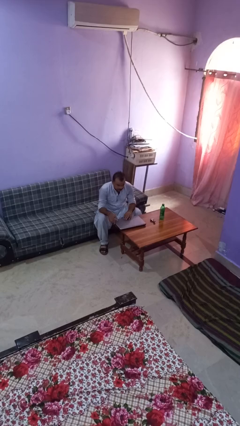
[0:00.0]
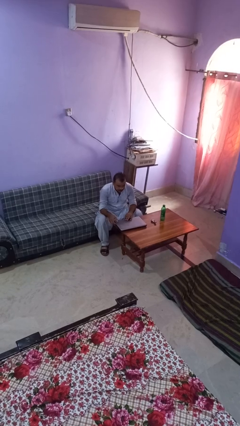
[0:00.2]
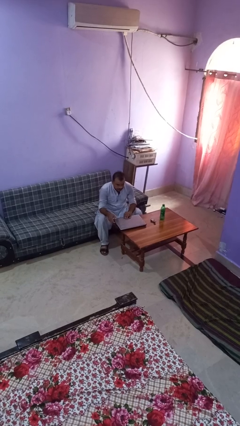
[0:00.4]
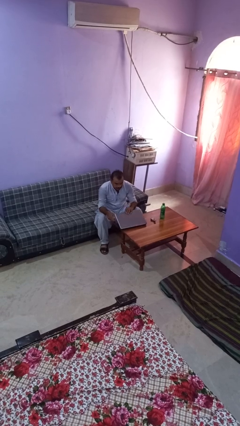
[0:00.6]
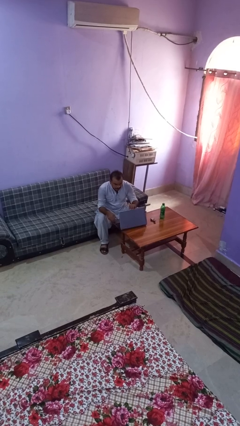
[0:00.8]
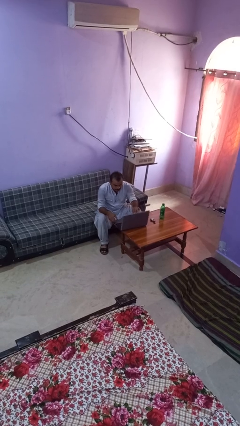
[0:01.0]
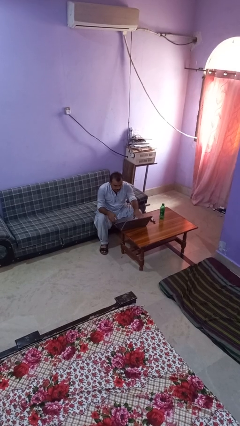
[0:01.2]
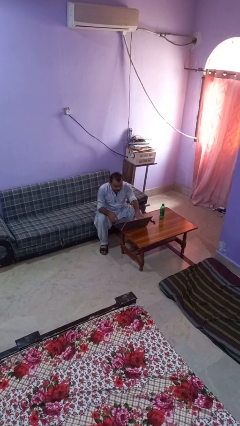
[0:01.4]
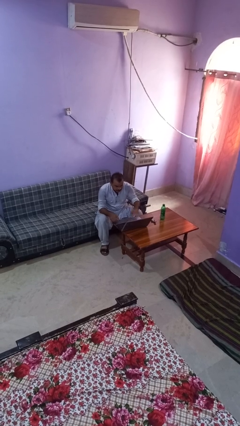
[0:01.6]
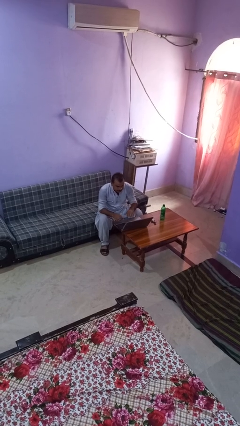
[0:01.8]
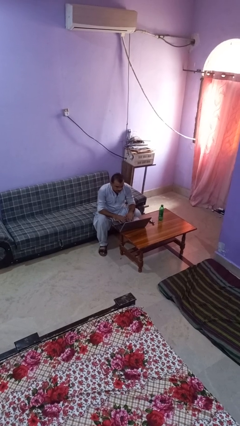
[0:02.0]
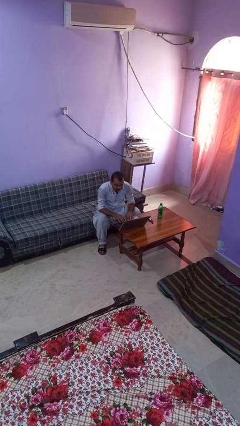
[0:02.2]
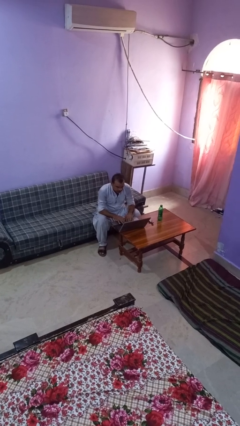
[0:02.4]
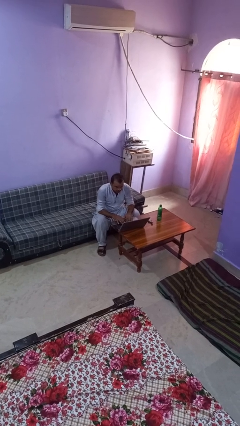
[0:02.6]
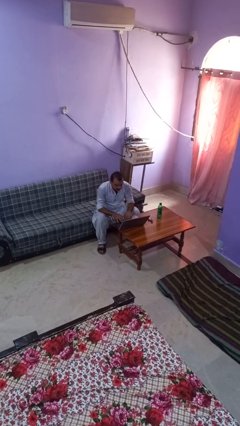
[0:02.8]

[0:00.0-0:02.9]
person opens laptop

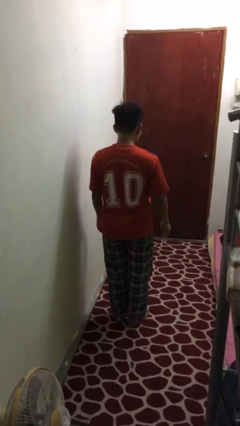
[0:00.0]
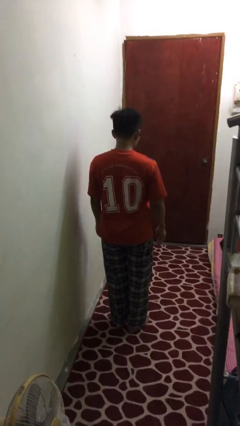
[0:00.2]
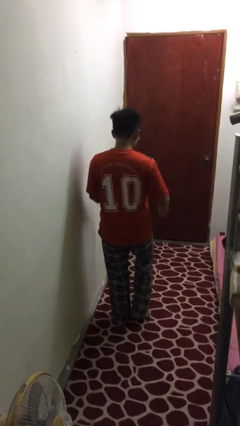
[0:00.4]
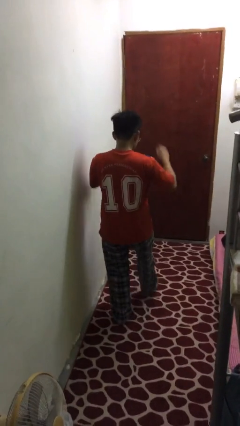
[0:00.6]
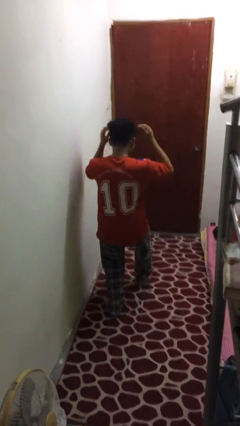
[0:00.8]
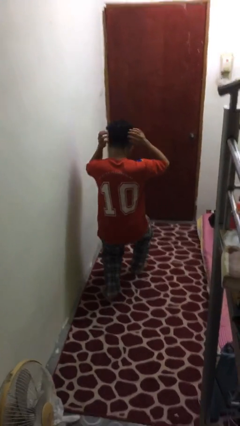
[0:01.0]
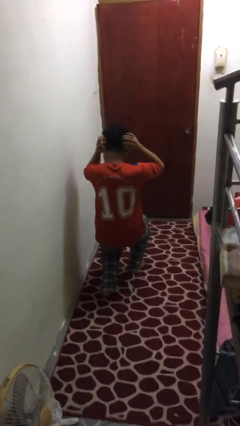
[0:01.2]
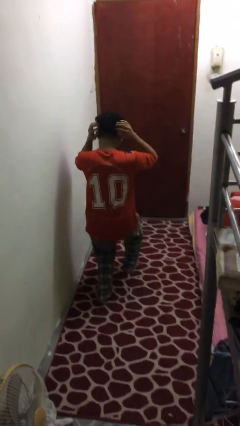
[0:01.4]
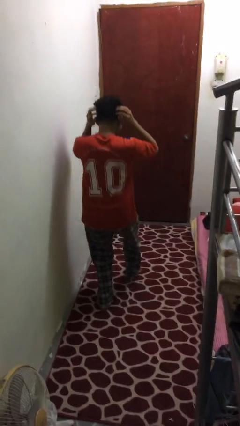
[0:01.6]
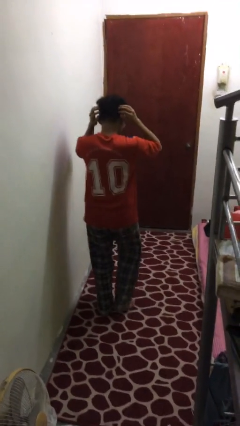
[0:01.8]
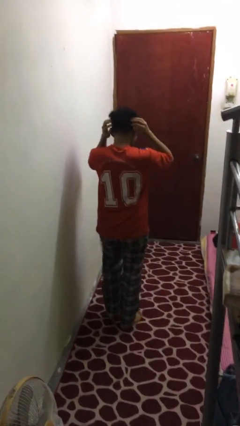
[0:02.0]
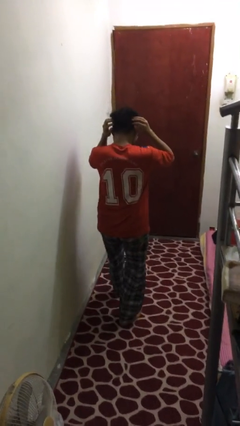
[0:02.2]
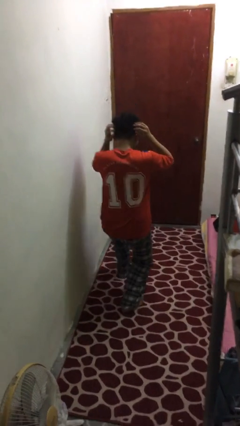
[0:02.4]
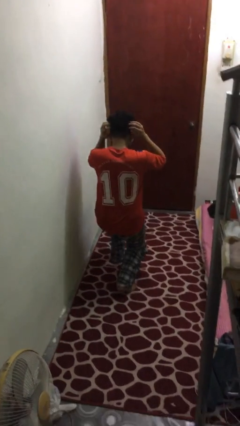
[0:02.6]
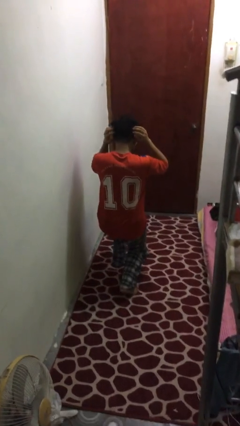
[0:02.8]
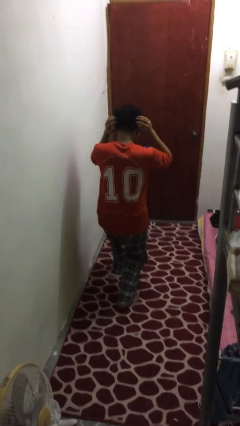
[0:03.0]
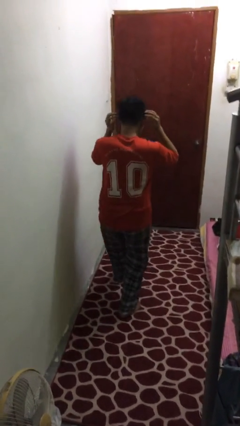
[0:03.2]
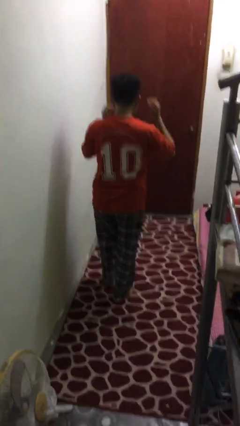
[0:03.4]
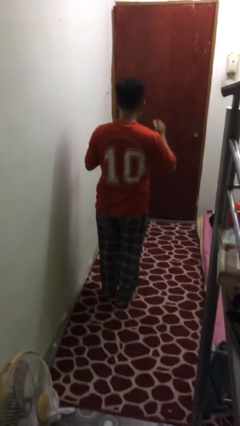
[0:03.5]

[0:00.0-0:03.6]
person exercises with lunges

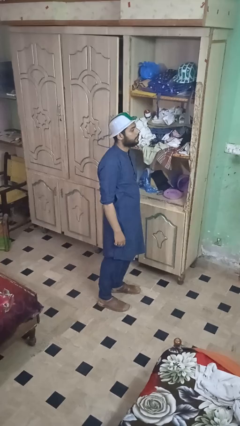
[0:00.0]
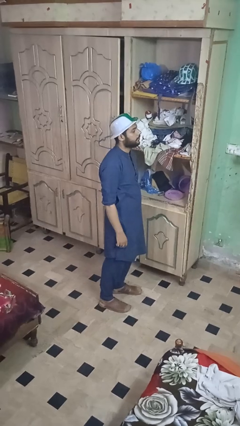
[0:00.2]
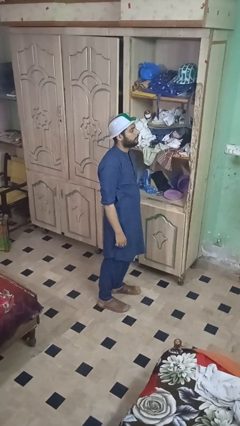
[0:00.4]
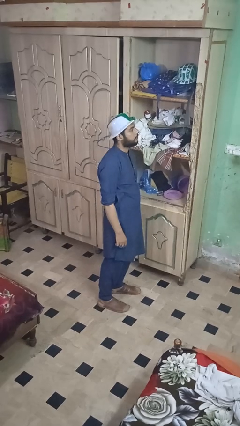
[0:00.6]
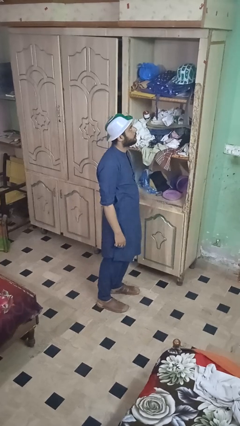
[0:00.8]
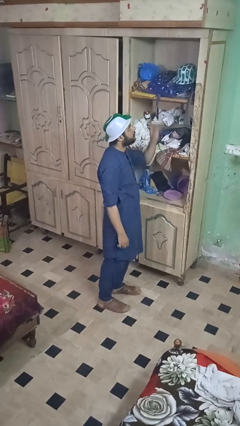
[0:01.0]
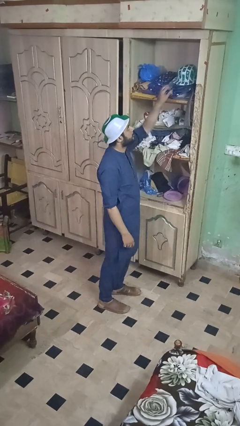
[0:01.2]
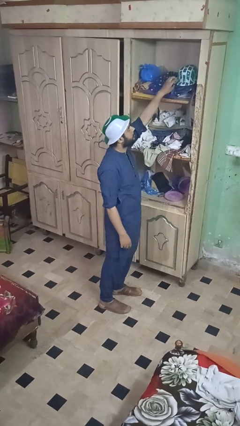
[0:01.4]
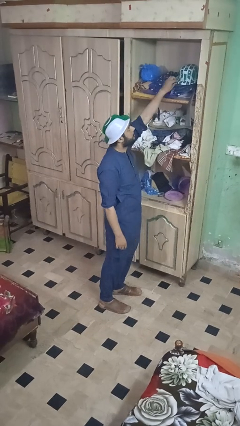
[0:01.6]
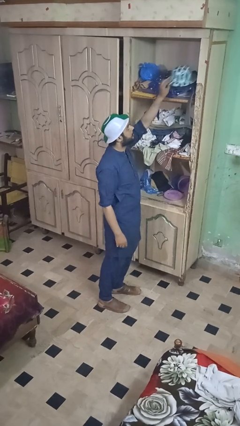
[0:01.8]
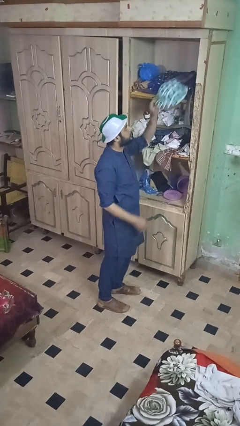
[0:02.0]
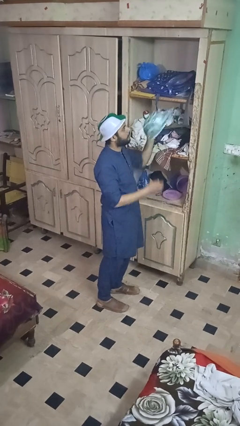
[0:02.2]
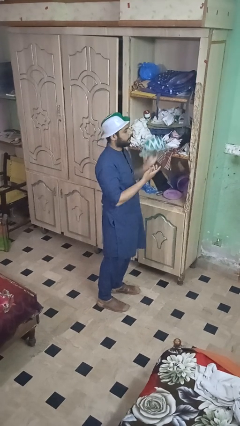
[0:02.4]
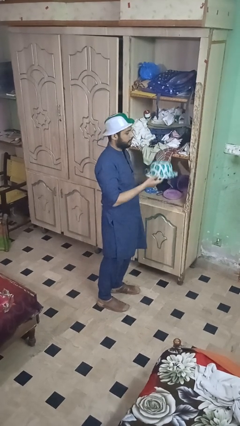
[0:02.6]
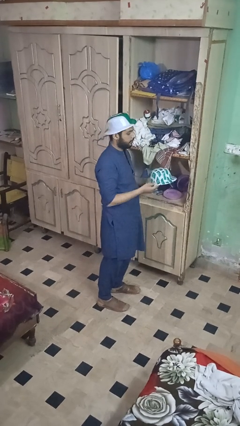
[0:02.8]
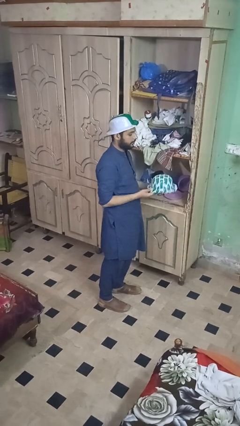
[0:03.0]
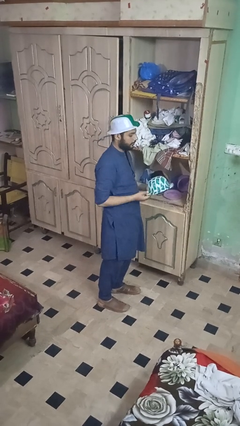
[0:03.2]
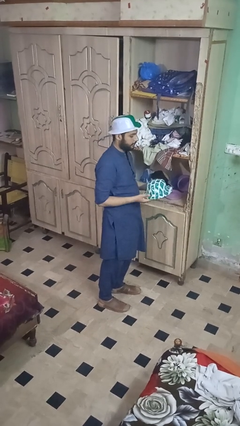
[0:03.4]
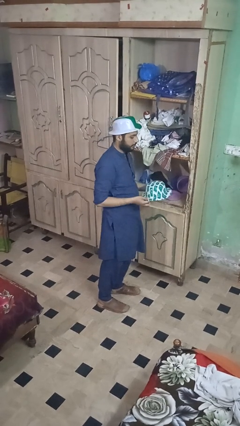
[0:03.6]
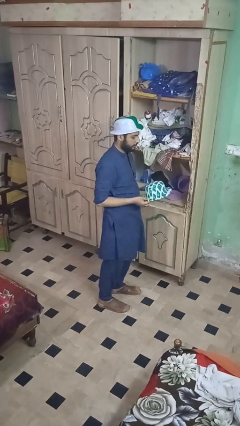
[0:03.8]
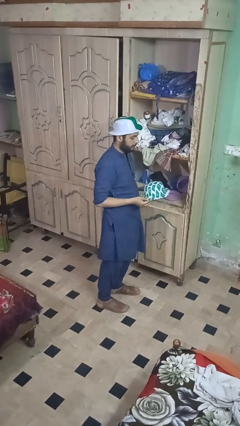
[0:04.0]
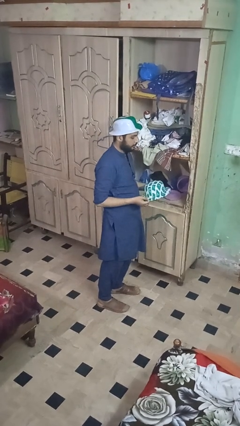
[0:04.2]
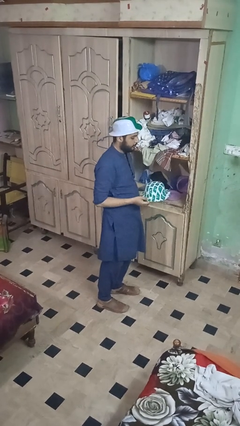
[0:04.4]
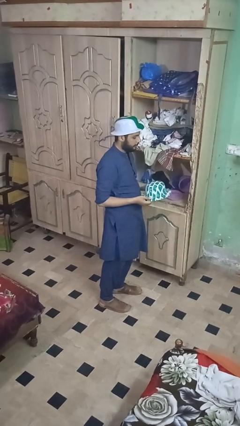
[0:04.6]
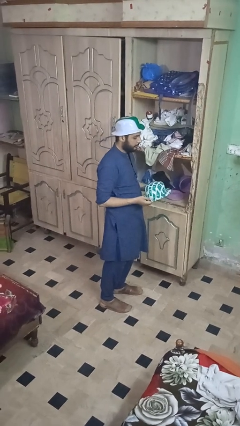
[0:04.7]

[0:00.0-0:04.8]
person picks up object from shelf

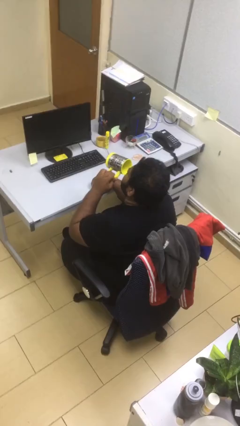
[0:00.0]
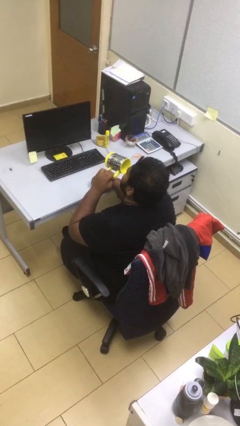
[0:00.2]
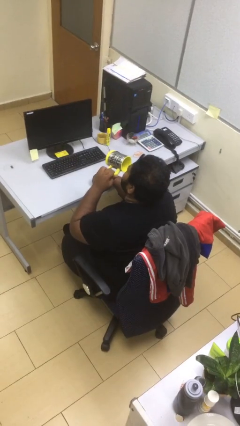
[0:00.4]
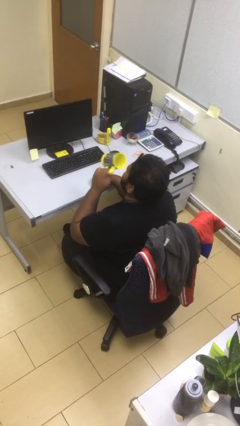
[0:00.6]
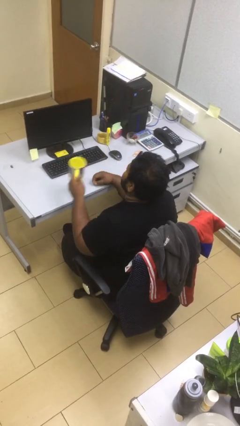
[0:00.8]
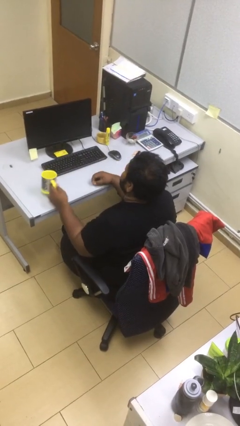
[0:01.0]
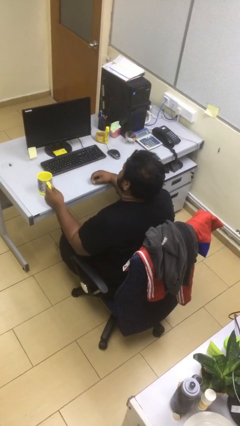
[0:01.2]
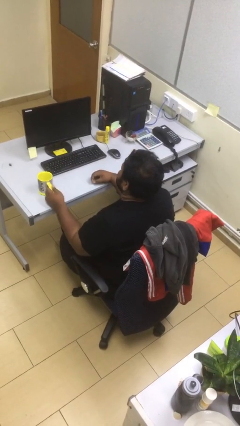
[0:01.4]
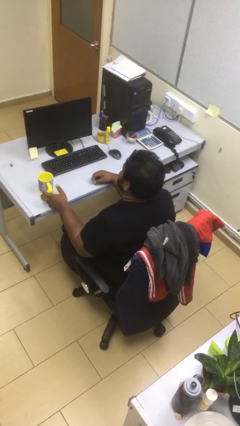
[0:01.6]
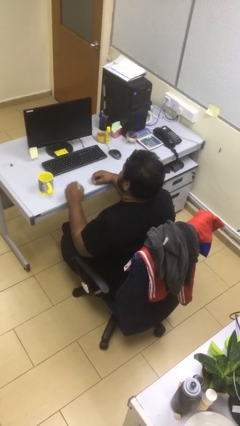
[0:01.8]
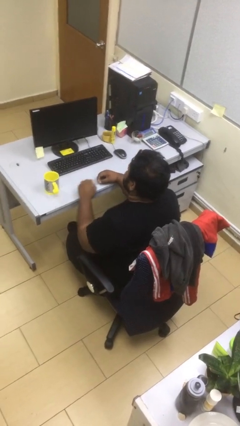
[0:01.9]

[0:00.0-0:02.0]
person puts down object on table

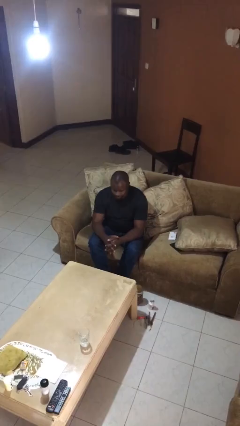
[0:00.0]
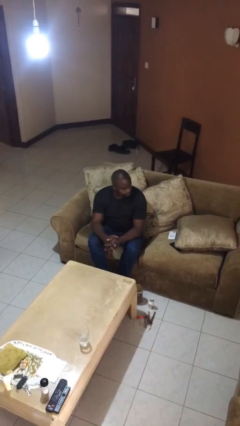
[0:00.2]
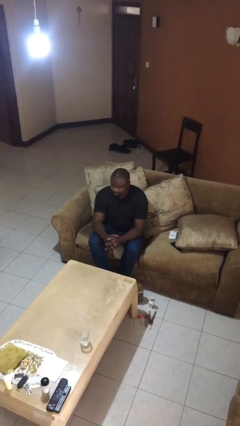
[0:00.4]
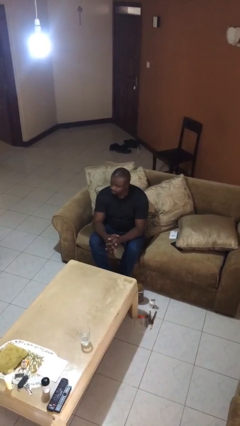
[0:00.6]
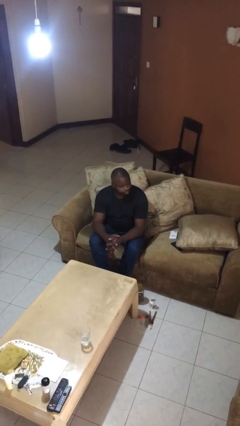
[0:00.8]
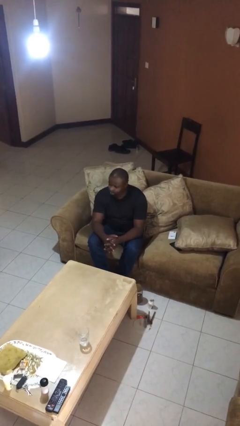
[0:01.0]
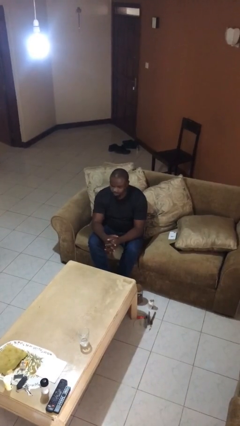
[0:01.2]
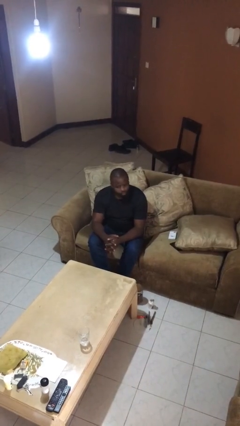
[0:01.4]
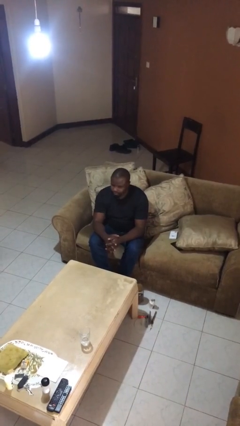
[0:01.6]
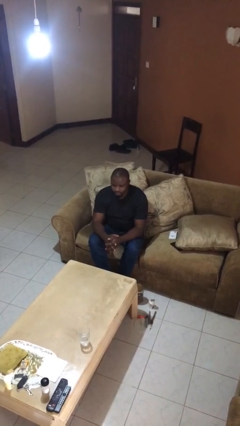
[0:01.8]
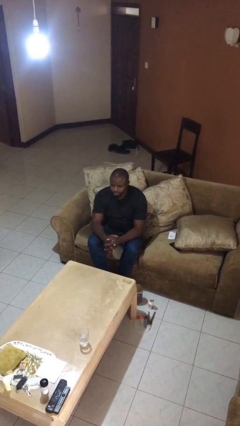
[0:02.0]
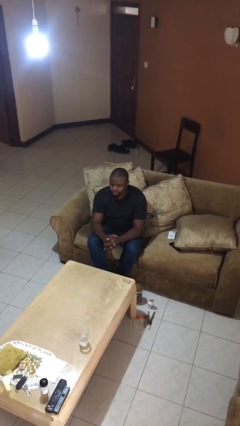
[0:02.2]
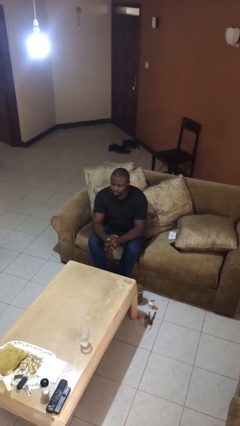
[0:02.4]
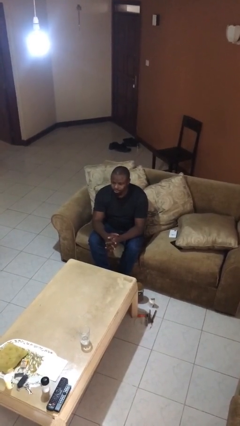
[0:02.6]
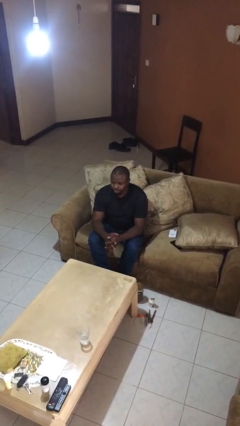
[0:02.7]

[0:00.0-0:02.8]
person shakes head

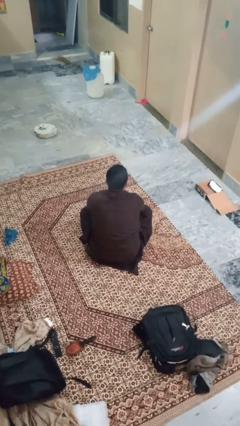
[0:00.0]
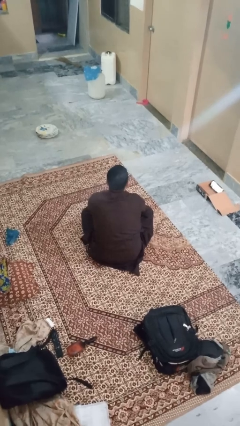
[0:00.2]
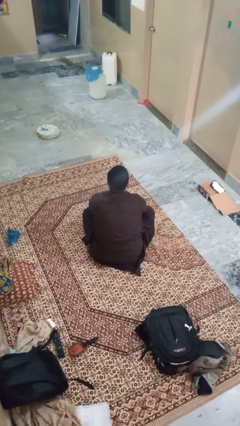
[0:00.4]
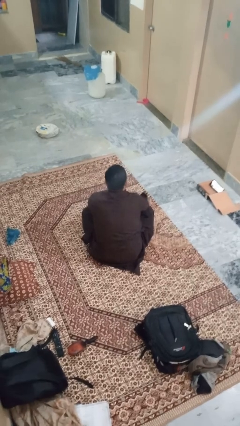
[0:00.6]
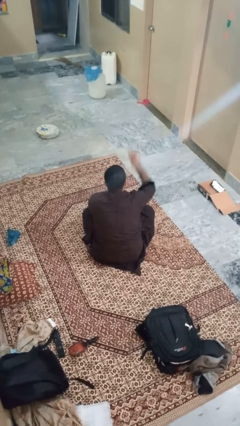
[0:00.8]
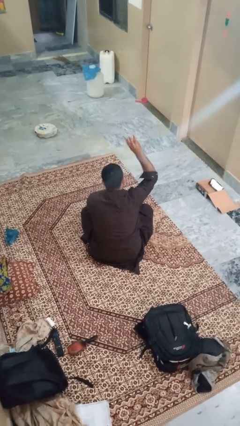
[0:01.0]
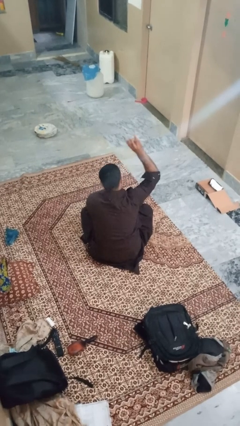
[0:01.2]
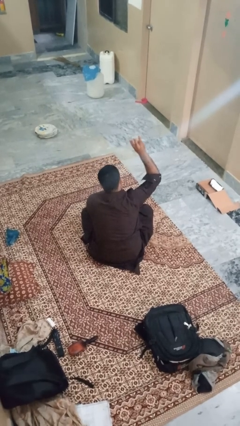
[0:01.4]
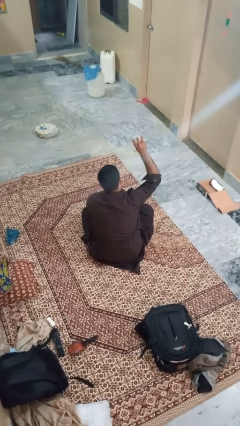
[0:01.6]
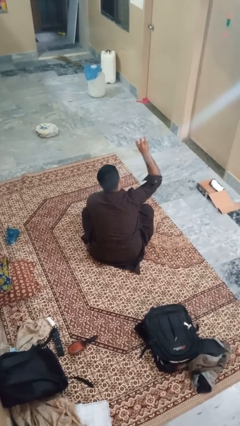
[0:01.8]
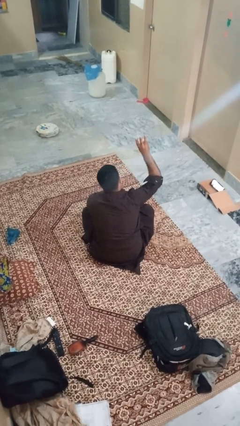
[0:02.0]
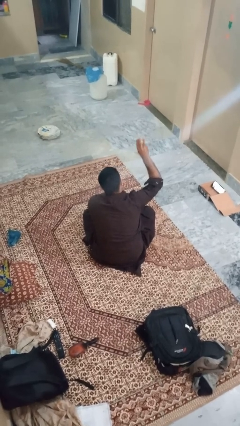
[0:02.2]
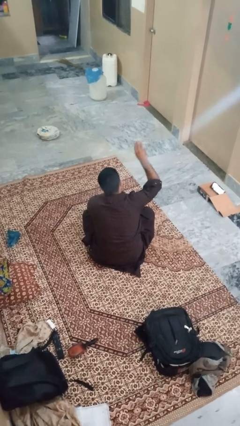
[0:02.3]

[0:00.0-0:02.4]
person gestures number three
